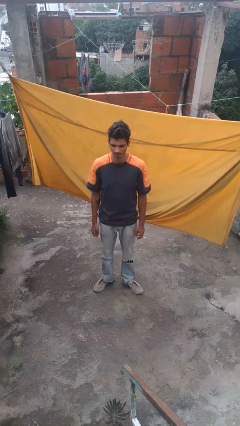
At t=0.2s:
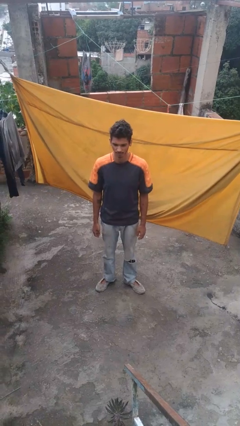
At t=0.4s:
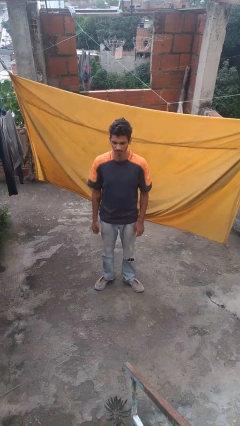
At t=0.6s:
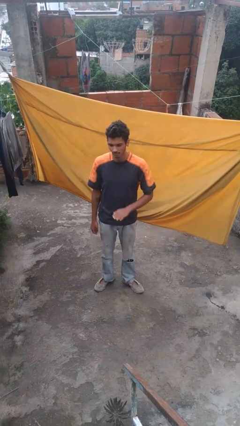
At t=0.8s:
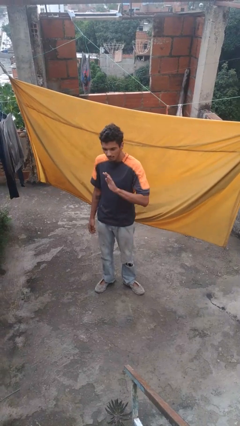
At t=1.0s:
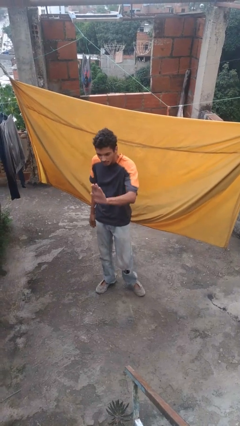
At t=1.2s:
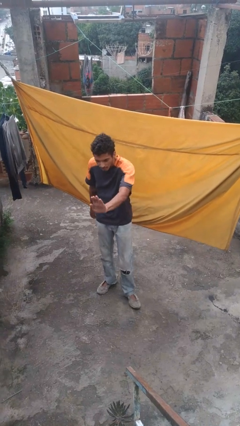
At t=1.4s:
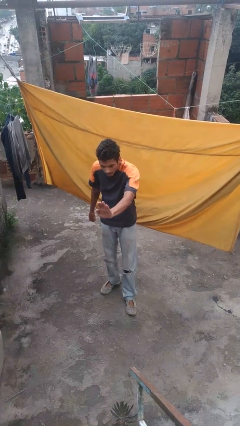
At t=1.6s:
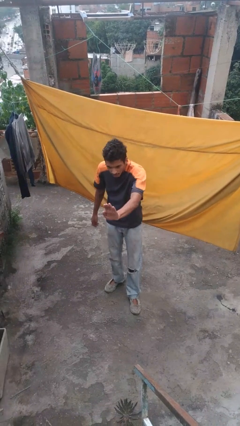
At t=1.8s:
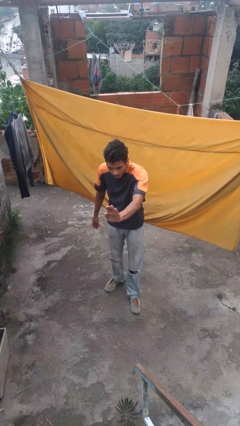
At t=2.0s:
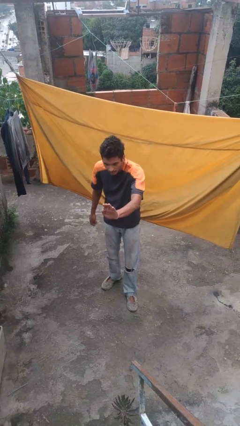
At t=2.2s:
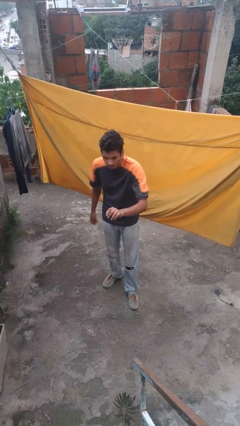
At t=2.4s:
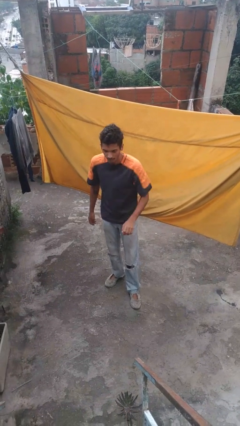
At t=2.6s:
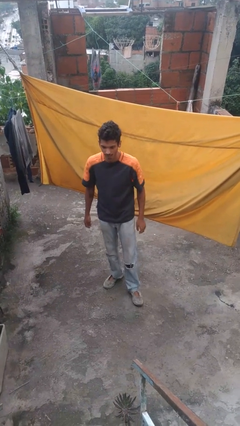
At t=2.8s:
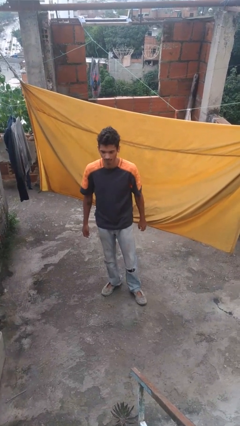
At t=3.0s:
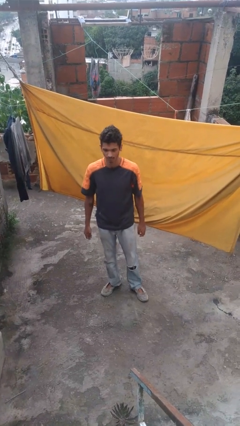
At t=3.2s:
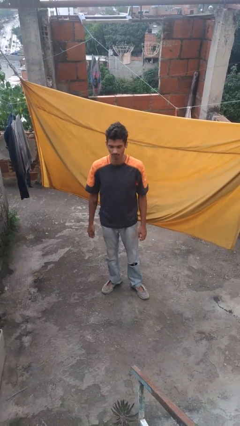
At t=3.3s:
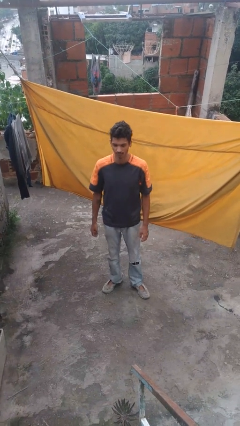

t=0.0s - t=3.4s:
person gestures stop

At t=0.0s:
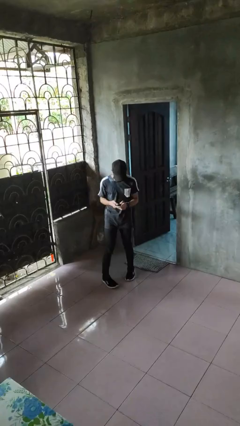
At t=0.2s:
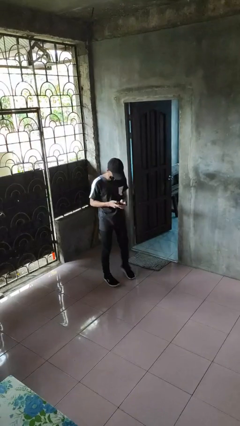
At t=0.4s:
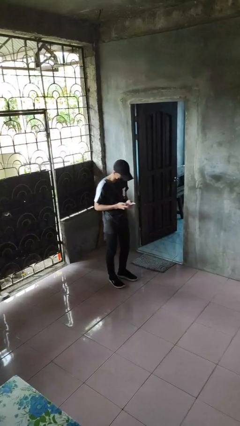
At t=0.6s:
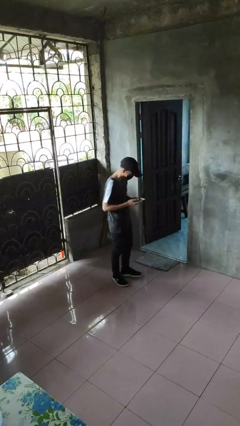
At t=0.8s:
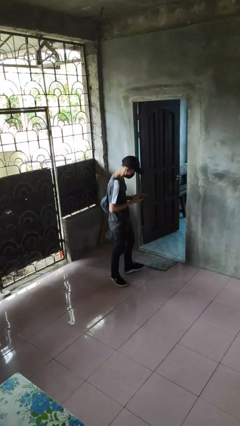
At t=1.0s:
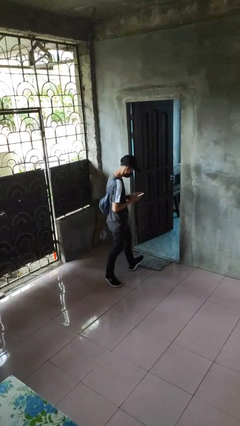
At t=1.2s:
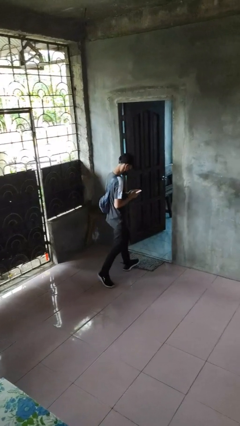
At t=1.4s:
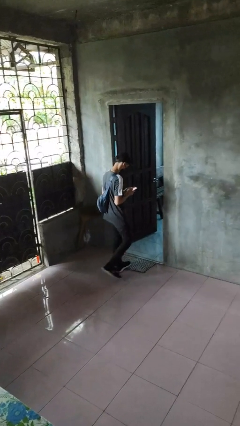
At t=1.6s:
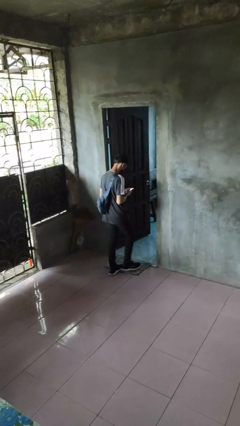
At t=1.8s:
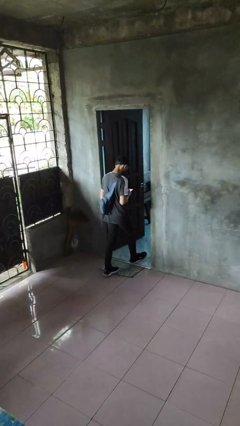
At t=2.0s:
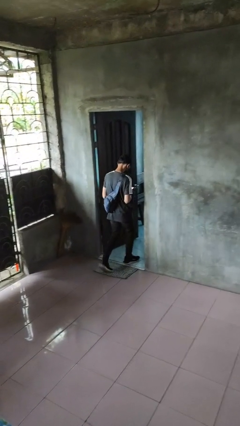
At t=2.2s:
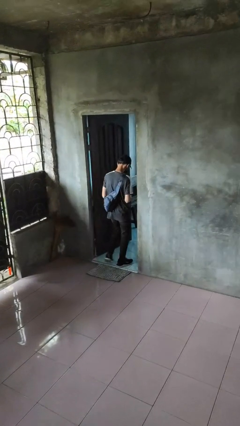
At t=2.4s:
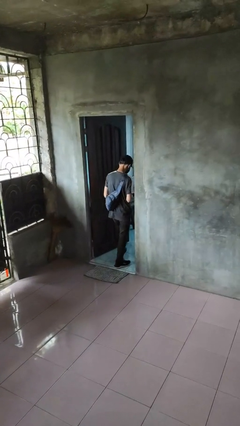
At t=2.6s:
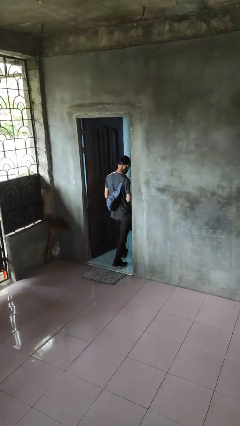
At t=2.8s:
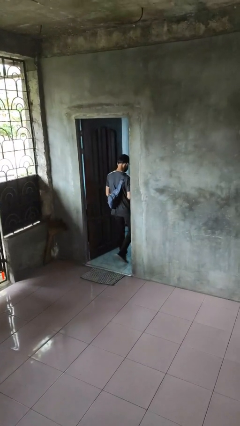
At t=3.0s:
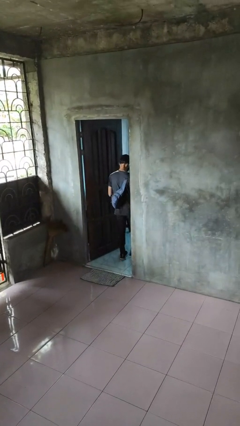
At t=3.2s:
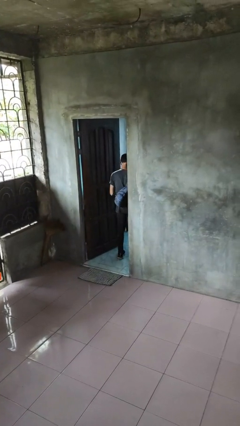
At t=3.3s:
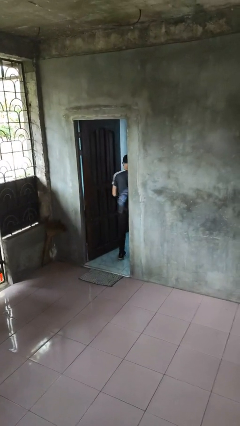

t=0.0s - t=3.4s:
person exits scene through structure

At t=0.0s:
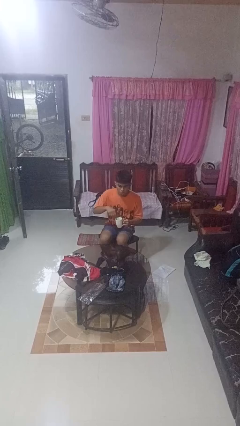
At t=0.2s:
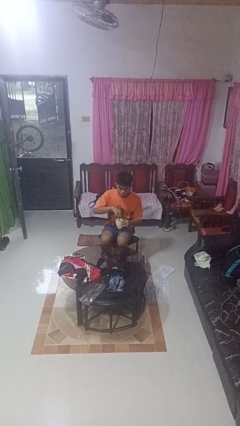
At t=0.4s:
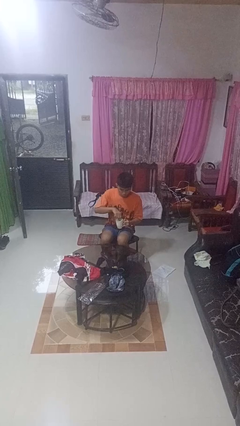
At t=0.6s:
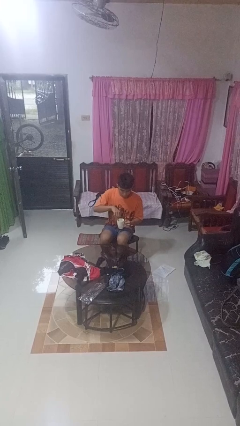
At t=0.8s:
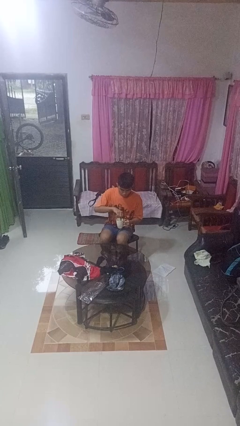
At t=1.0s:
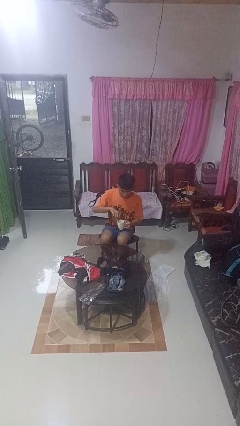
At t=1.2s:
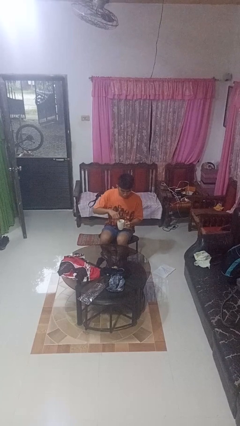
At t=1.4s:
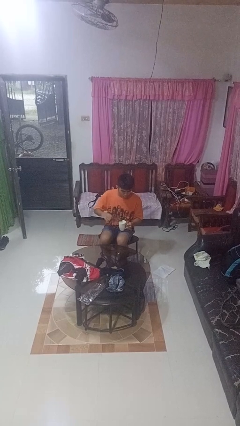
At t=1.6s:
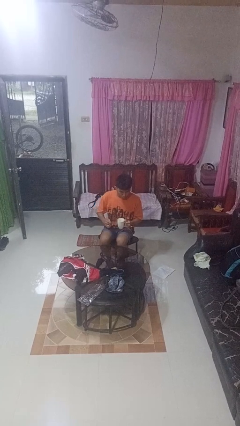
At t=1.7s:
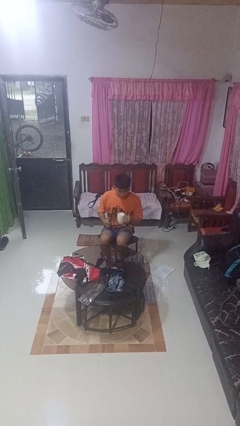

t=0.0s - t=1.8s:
person stirs mug

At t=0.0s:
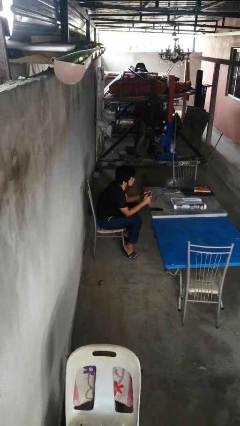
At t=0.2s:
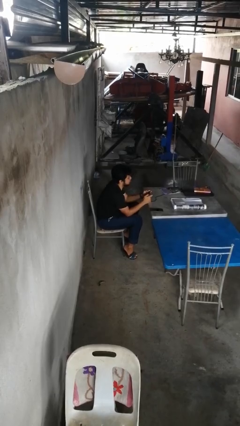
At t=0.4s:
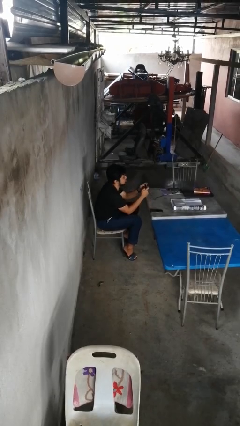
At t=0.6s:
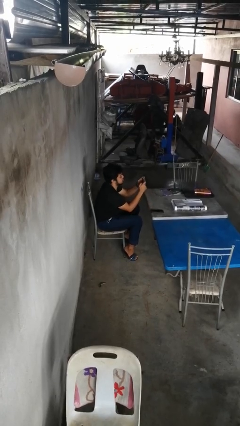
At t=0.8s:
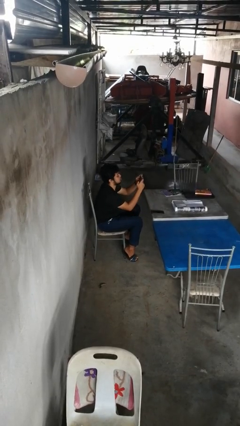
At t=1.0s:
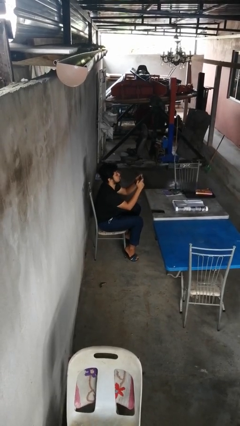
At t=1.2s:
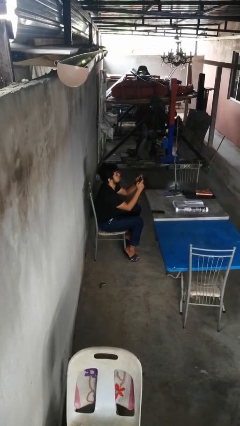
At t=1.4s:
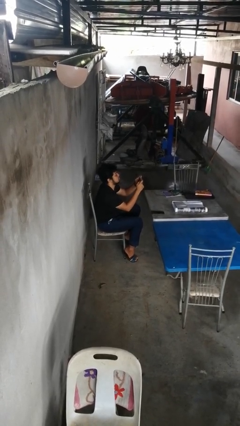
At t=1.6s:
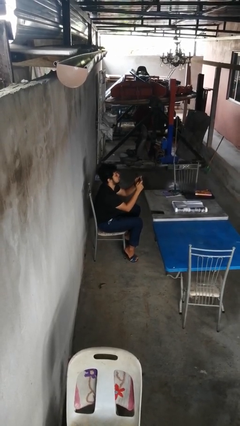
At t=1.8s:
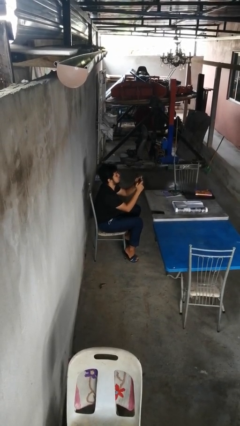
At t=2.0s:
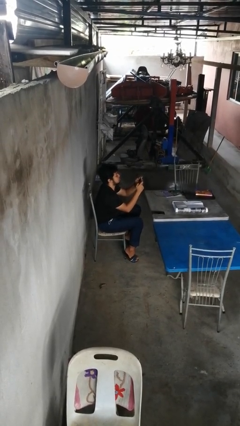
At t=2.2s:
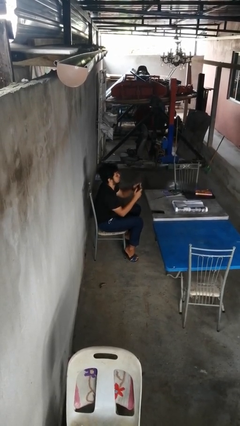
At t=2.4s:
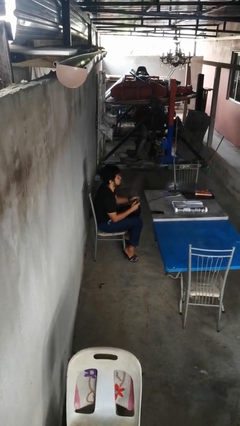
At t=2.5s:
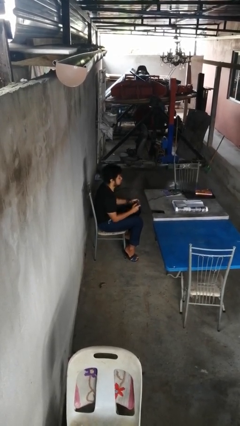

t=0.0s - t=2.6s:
person interacts with handheld game

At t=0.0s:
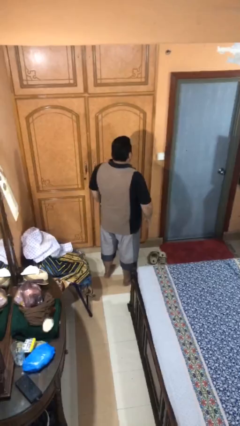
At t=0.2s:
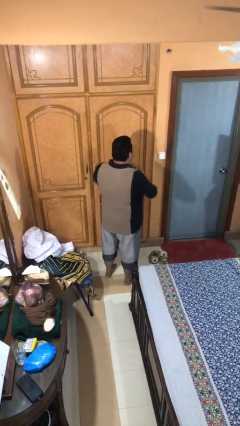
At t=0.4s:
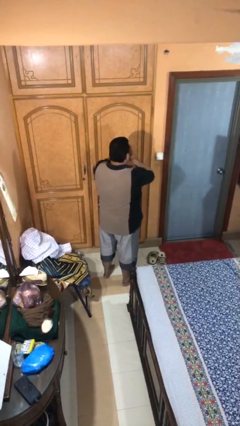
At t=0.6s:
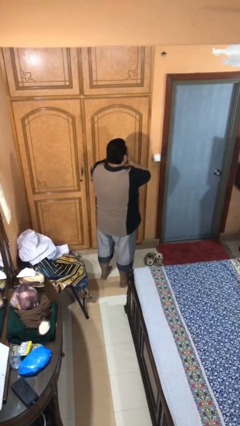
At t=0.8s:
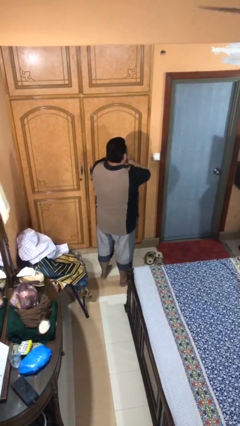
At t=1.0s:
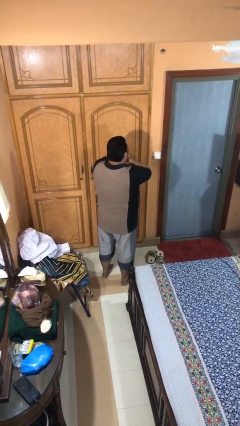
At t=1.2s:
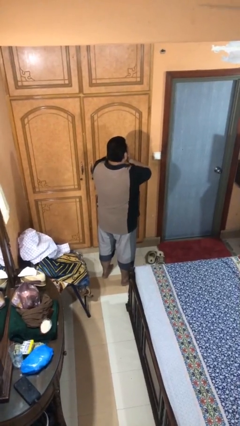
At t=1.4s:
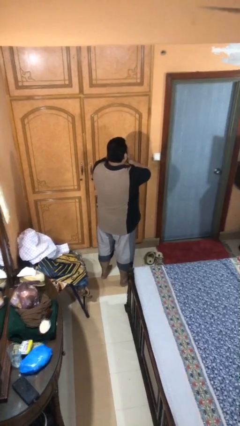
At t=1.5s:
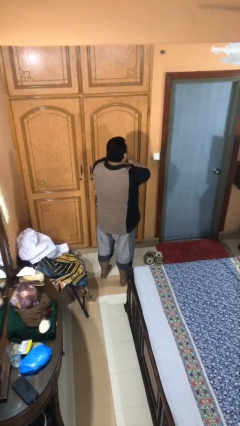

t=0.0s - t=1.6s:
person covers face with hands

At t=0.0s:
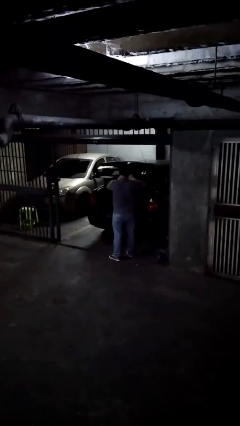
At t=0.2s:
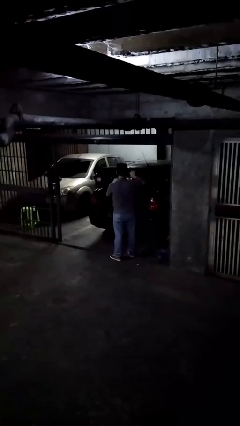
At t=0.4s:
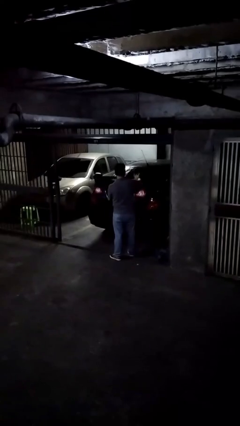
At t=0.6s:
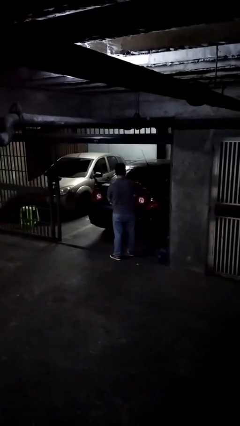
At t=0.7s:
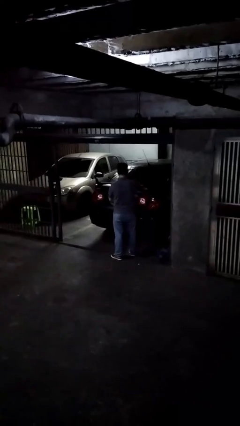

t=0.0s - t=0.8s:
person closes car trunk

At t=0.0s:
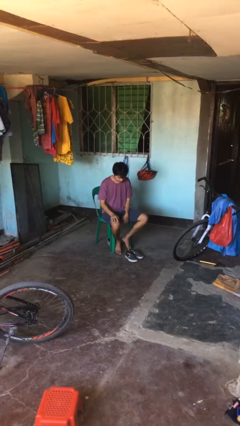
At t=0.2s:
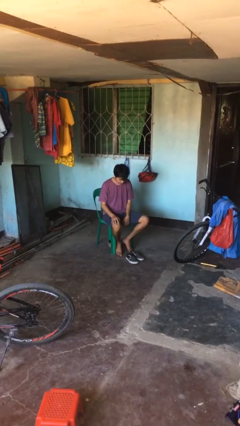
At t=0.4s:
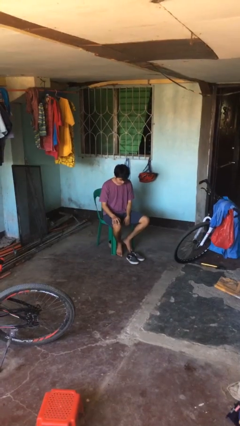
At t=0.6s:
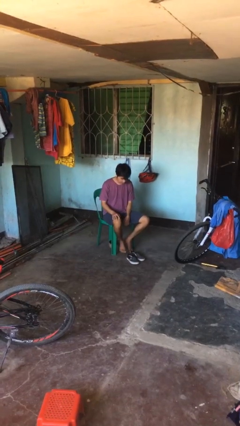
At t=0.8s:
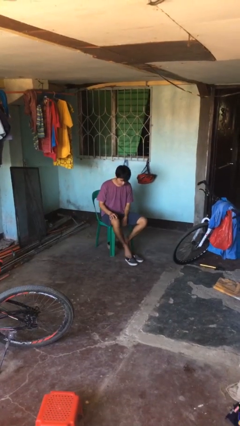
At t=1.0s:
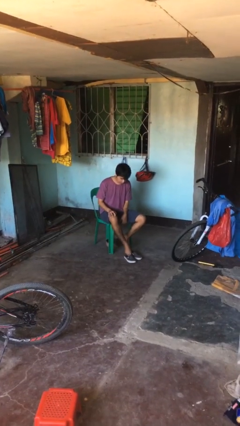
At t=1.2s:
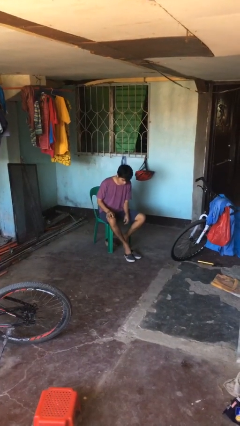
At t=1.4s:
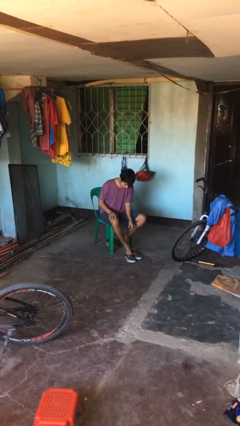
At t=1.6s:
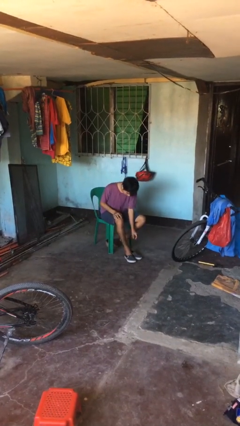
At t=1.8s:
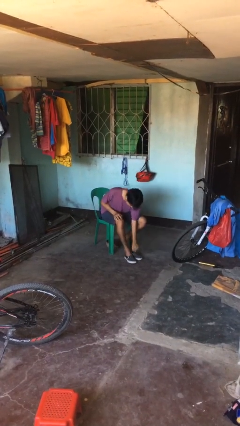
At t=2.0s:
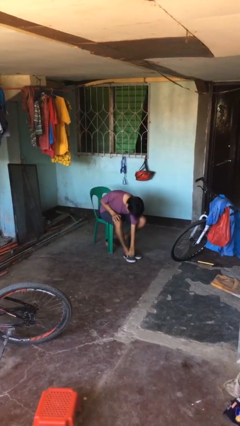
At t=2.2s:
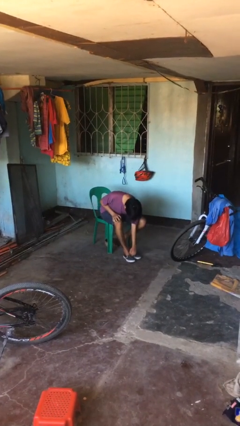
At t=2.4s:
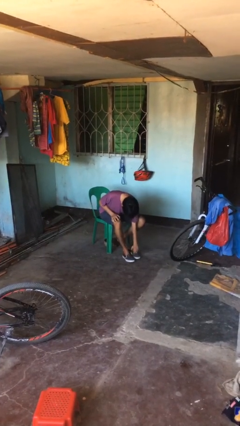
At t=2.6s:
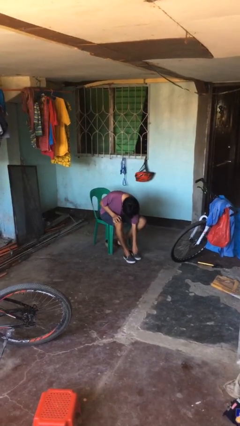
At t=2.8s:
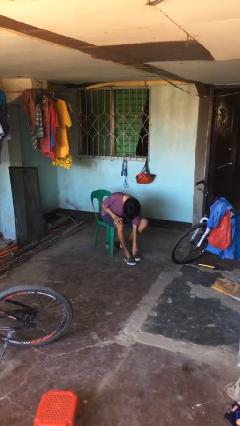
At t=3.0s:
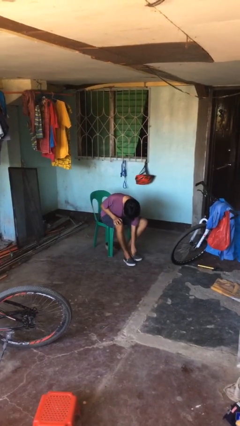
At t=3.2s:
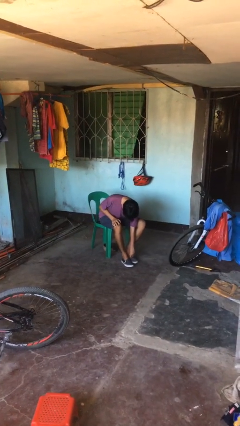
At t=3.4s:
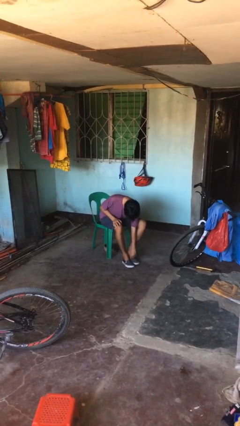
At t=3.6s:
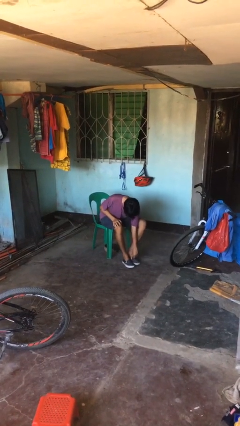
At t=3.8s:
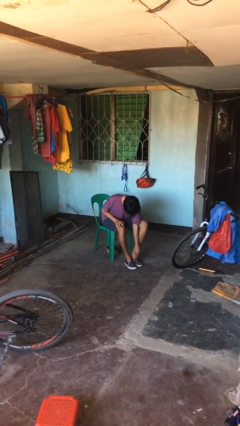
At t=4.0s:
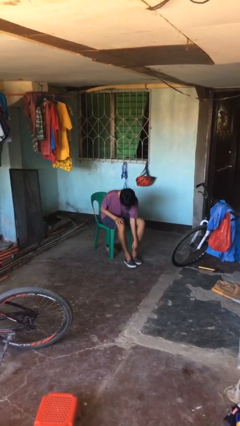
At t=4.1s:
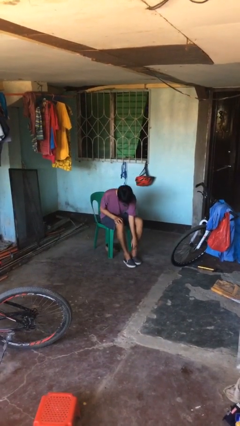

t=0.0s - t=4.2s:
person puts on shoes
